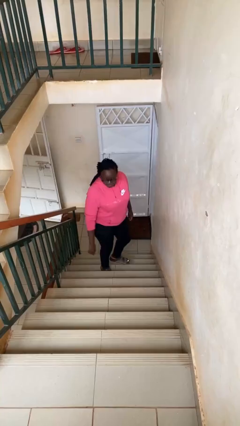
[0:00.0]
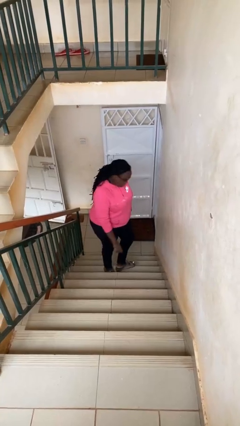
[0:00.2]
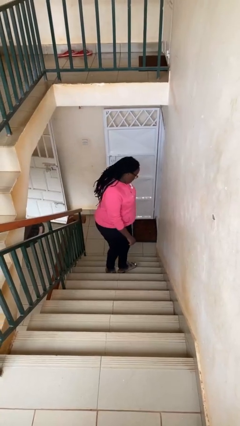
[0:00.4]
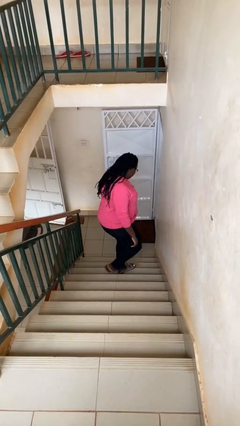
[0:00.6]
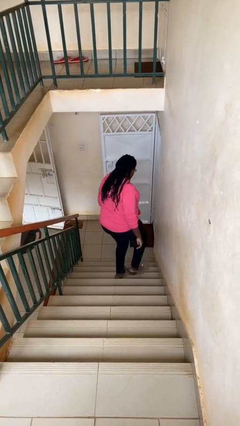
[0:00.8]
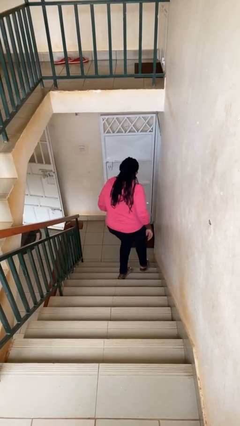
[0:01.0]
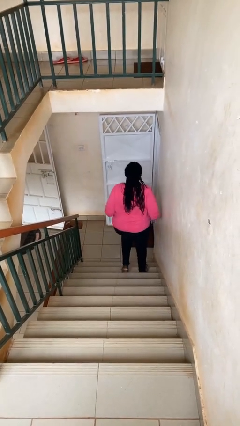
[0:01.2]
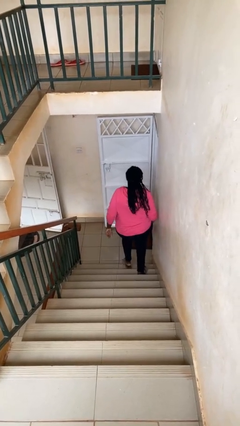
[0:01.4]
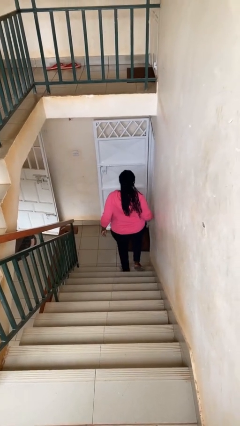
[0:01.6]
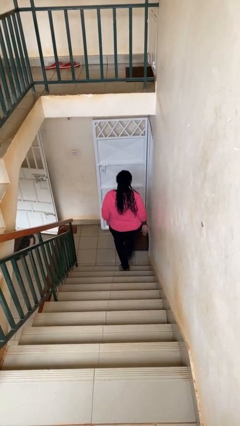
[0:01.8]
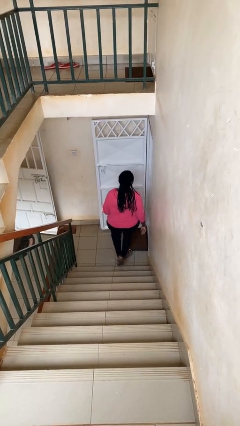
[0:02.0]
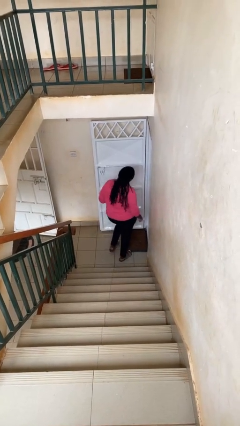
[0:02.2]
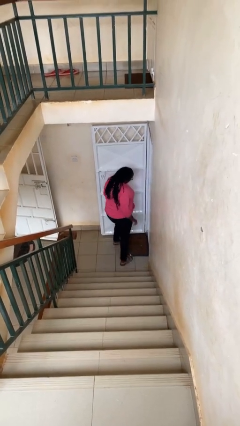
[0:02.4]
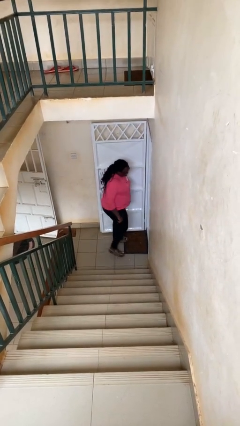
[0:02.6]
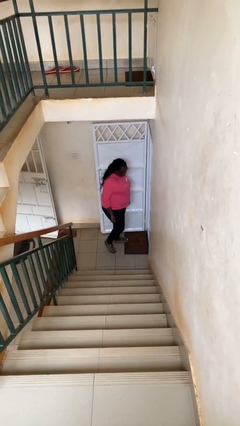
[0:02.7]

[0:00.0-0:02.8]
person climbs down stairs

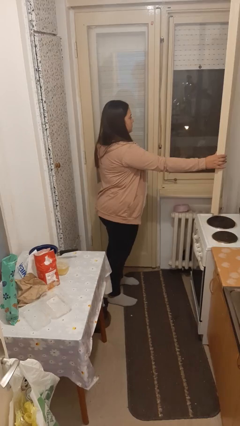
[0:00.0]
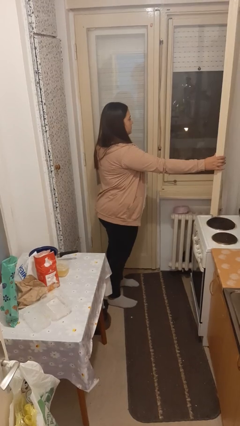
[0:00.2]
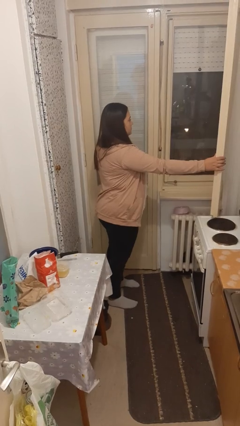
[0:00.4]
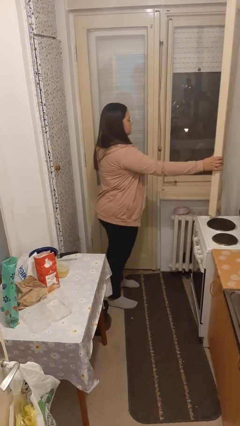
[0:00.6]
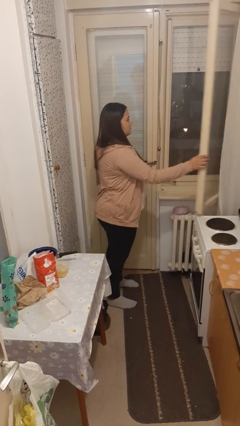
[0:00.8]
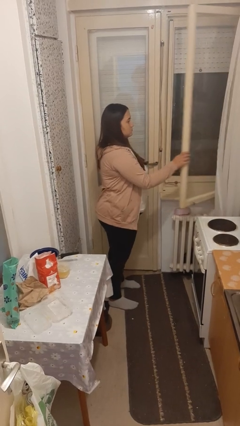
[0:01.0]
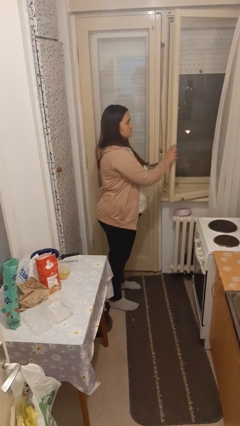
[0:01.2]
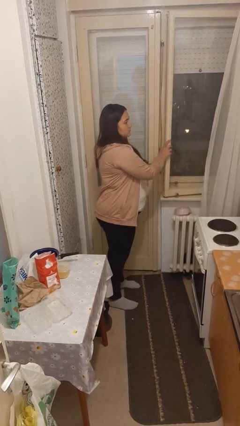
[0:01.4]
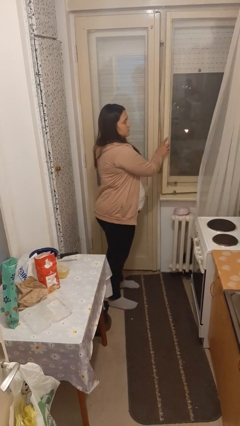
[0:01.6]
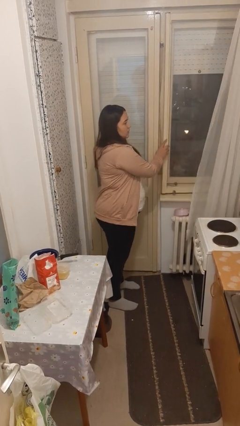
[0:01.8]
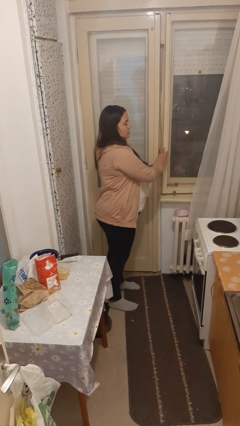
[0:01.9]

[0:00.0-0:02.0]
person closes home window

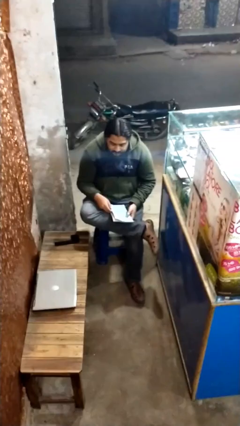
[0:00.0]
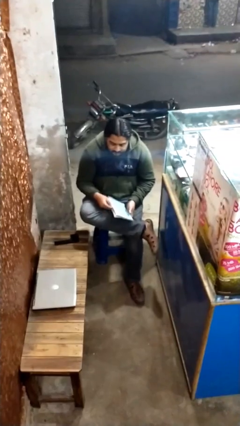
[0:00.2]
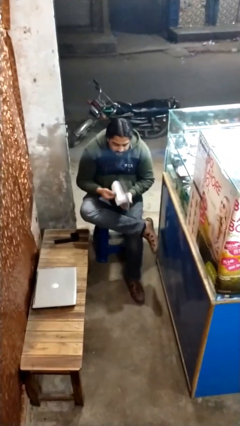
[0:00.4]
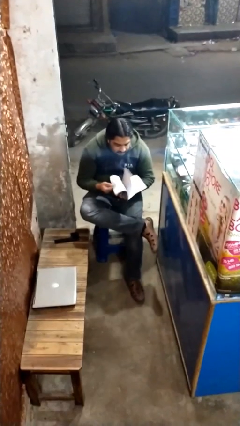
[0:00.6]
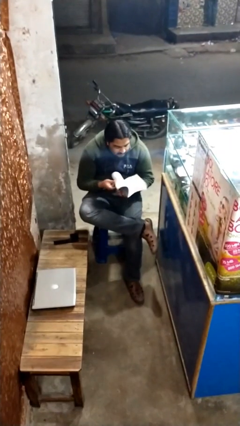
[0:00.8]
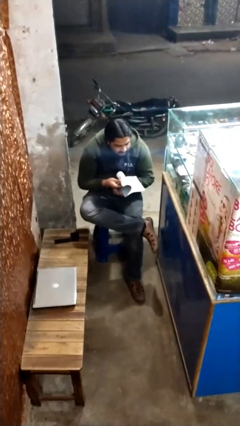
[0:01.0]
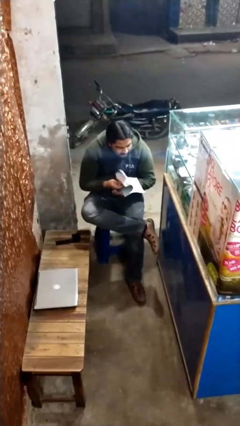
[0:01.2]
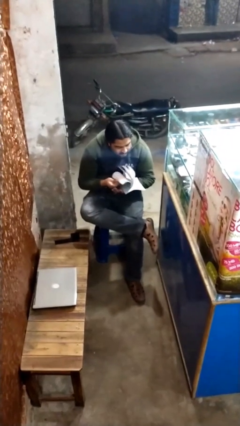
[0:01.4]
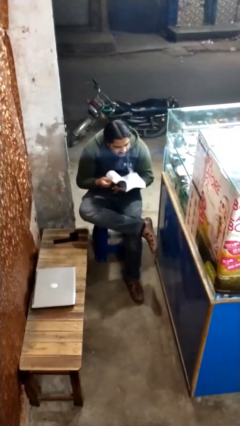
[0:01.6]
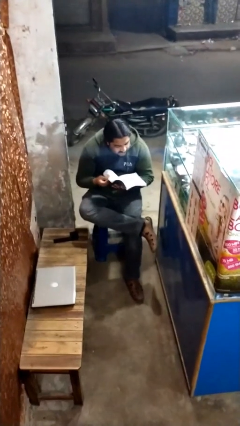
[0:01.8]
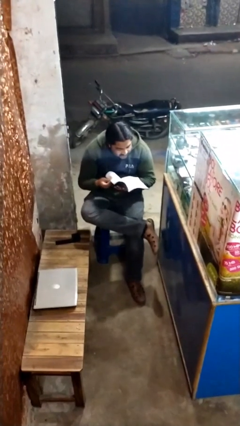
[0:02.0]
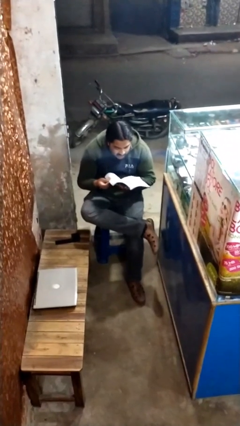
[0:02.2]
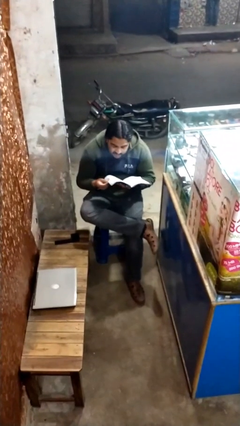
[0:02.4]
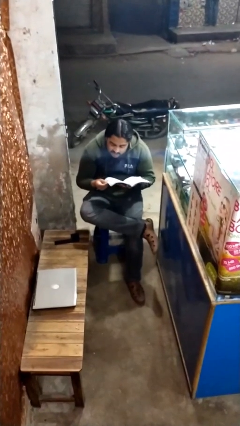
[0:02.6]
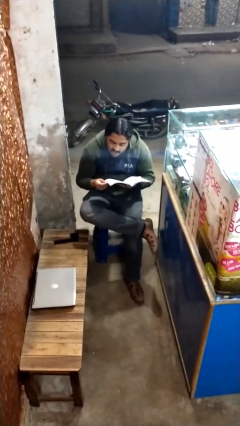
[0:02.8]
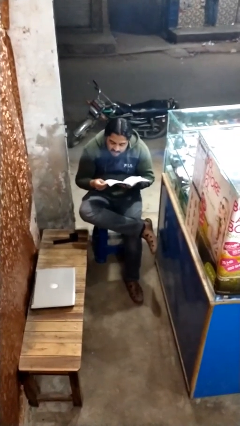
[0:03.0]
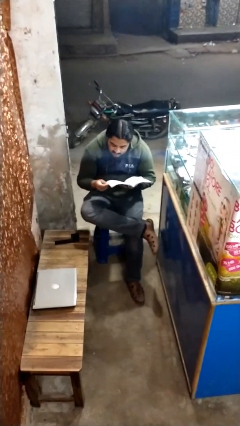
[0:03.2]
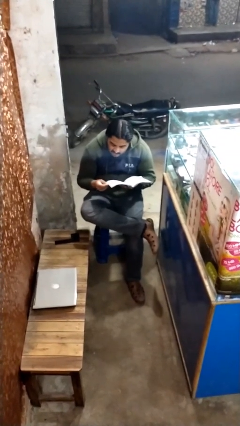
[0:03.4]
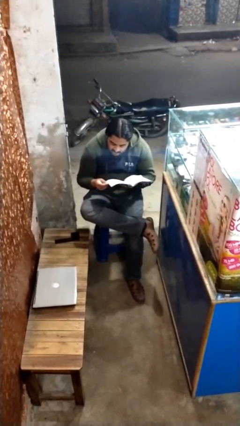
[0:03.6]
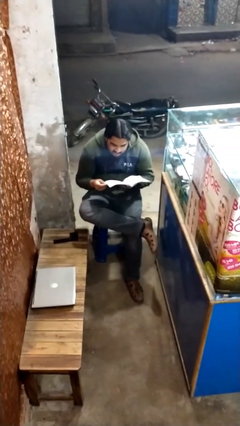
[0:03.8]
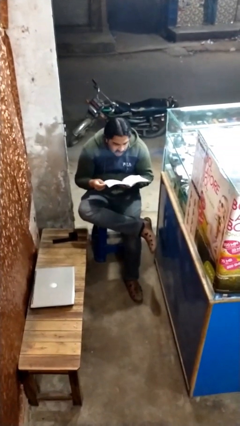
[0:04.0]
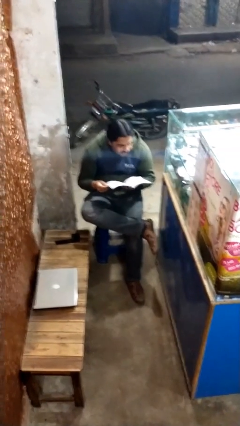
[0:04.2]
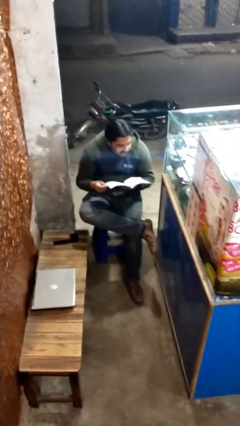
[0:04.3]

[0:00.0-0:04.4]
person reads document

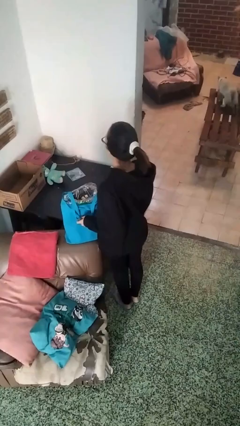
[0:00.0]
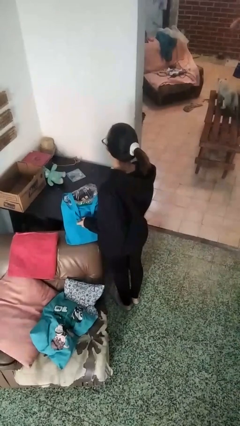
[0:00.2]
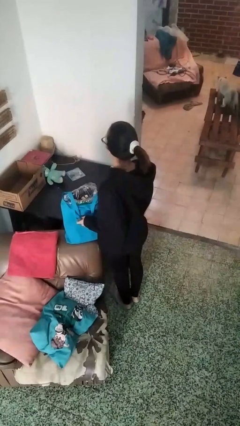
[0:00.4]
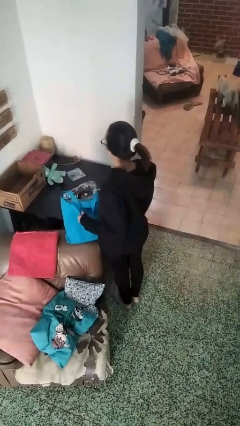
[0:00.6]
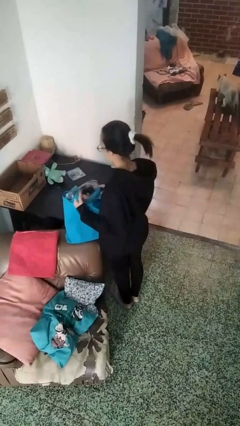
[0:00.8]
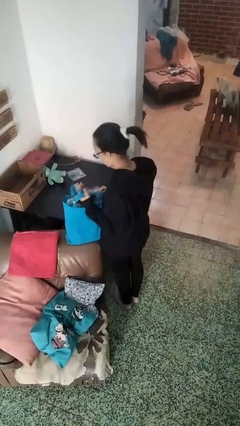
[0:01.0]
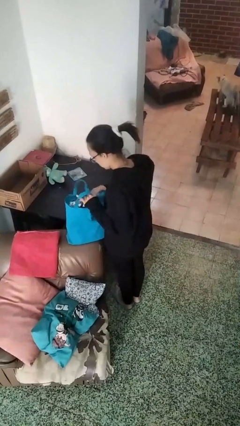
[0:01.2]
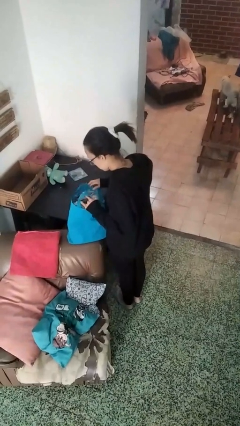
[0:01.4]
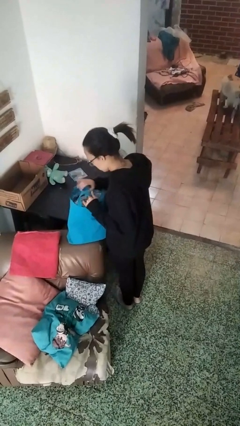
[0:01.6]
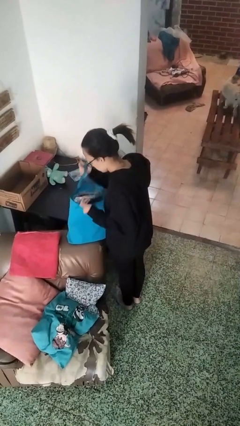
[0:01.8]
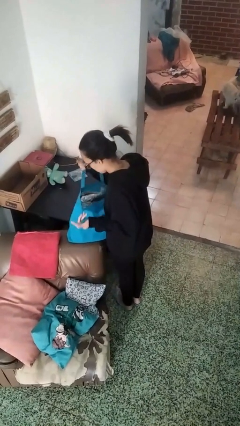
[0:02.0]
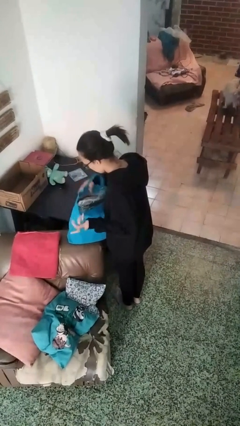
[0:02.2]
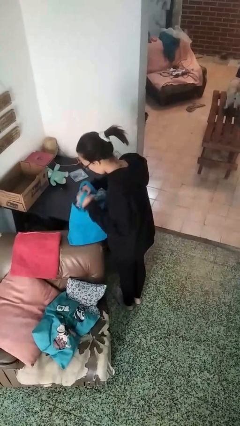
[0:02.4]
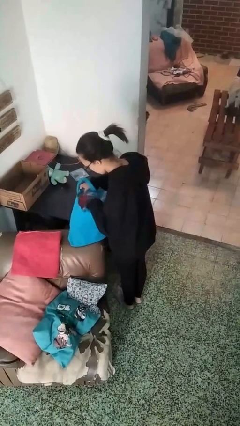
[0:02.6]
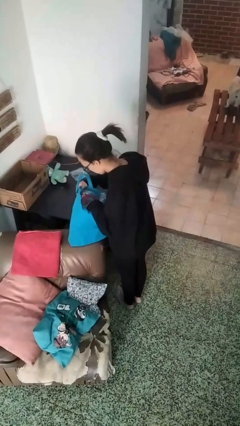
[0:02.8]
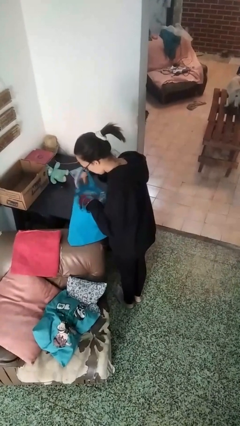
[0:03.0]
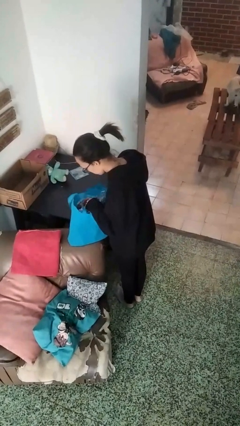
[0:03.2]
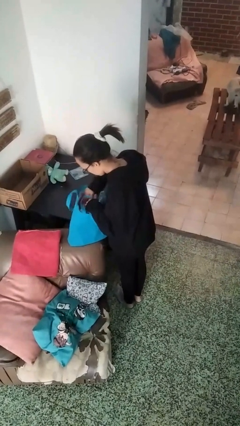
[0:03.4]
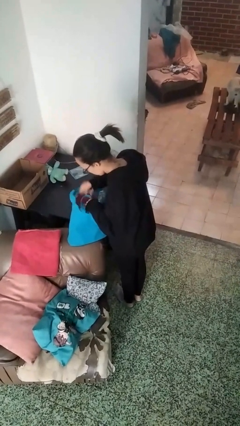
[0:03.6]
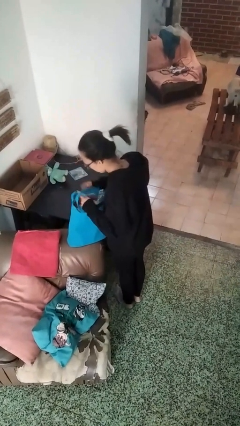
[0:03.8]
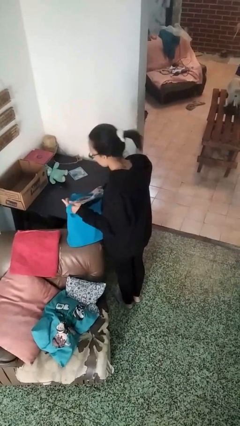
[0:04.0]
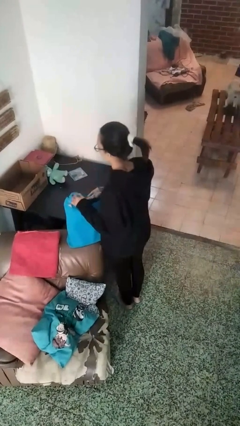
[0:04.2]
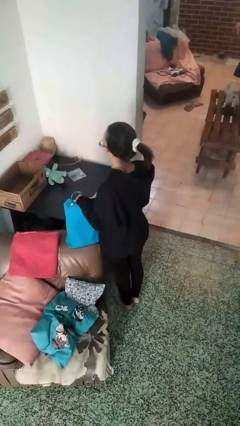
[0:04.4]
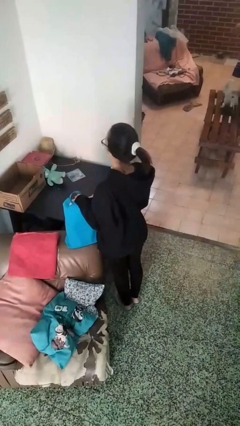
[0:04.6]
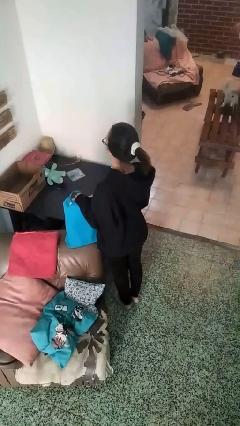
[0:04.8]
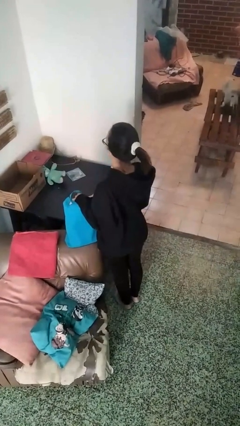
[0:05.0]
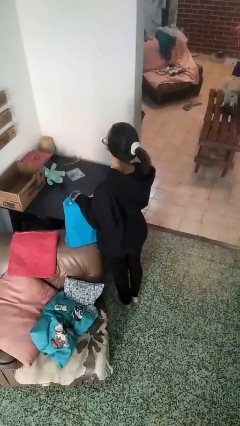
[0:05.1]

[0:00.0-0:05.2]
person searches in bag

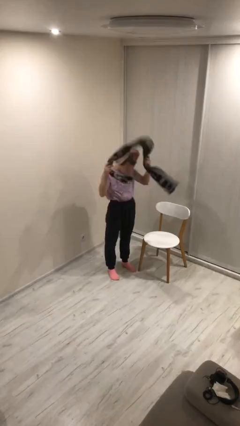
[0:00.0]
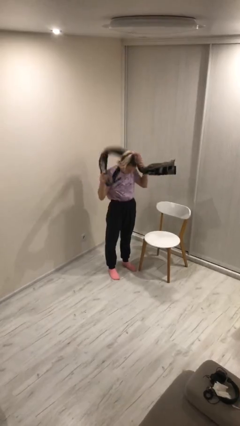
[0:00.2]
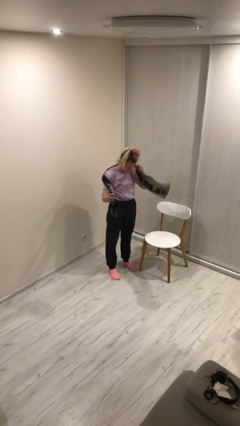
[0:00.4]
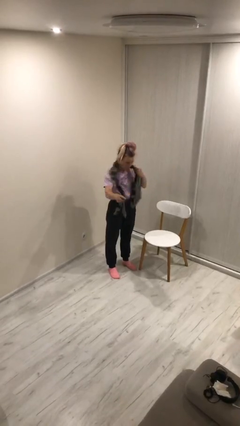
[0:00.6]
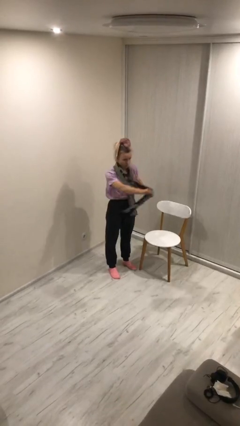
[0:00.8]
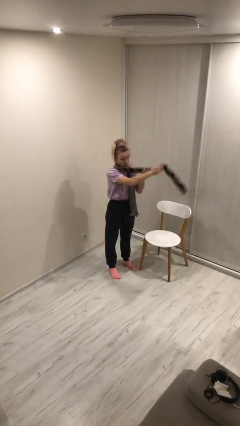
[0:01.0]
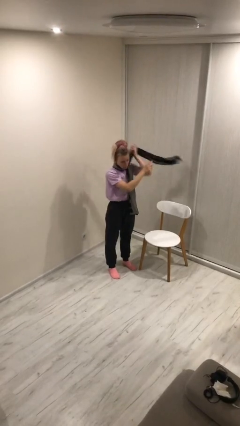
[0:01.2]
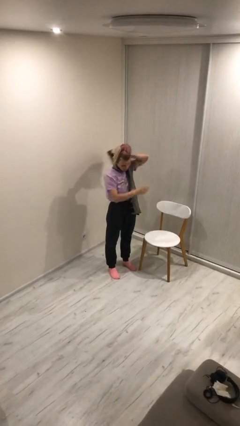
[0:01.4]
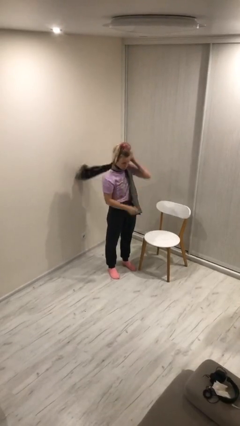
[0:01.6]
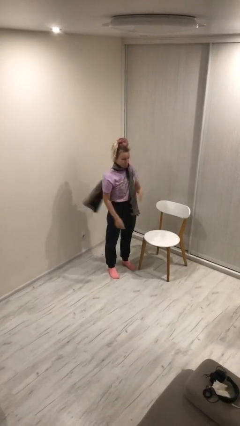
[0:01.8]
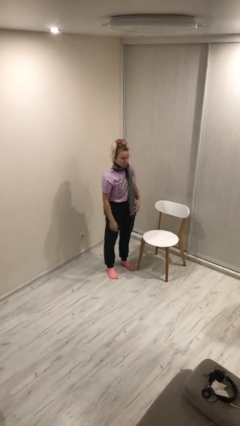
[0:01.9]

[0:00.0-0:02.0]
person puts on scarf

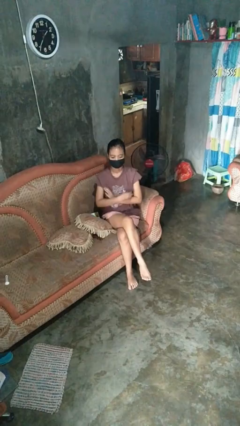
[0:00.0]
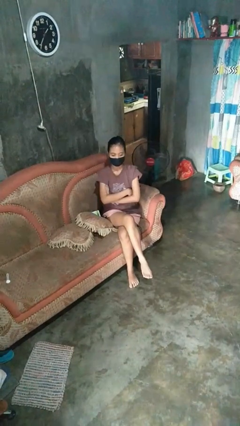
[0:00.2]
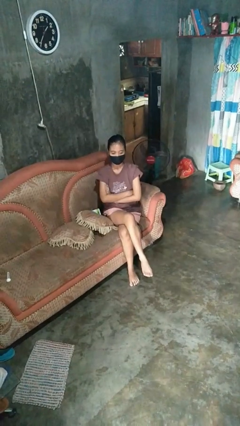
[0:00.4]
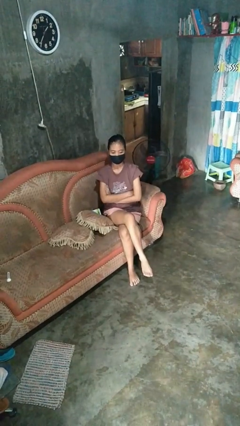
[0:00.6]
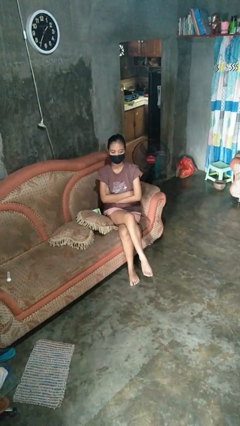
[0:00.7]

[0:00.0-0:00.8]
person crosses arms

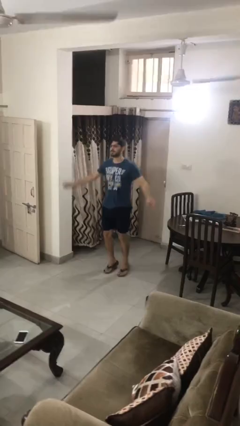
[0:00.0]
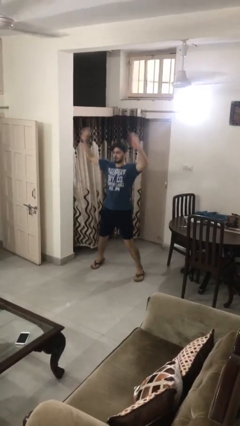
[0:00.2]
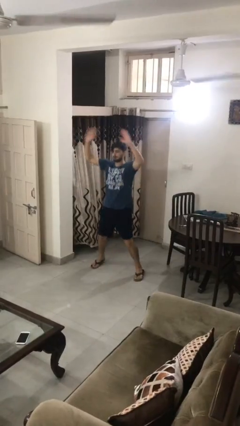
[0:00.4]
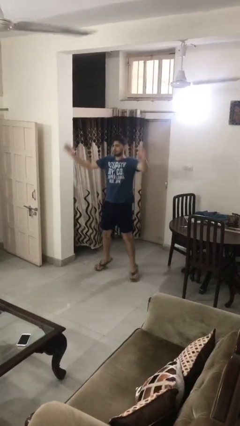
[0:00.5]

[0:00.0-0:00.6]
person exercises with jumping jacks
